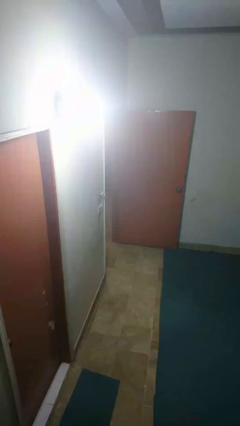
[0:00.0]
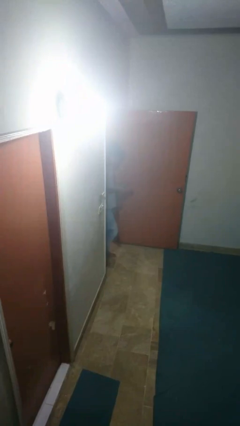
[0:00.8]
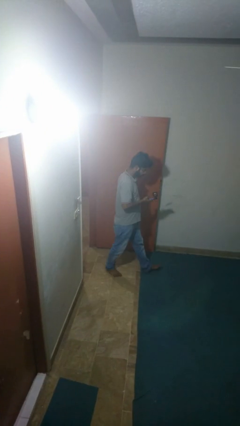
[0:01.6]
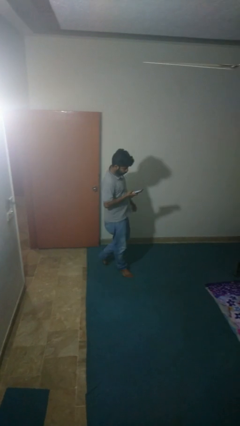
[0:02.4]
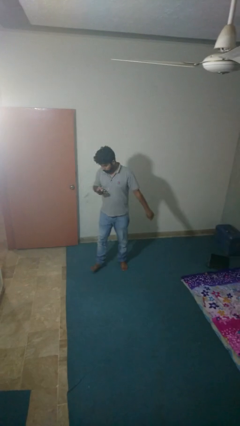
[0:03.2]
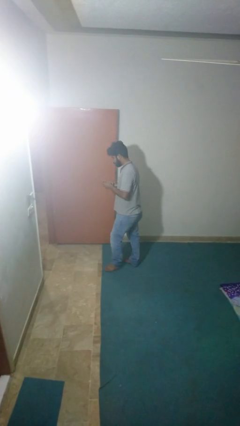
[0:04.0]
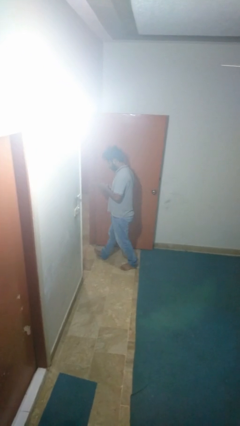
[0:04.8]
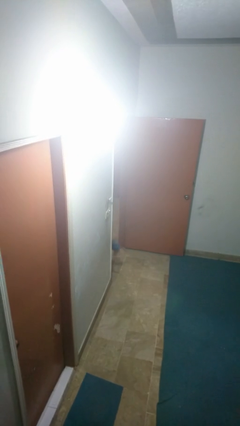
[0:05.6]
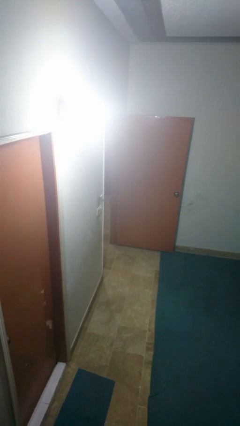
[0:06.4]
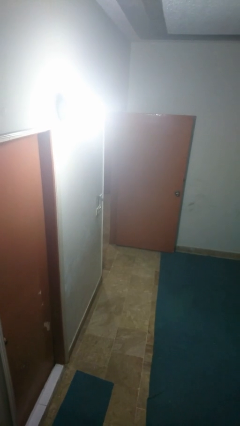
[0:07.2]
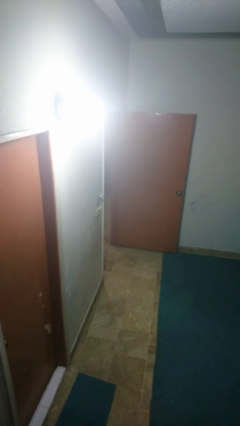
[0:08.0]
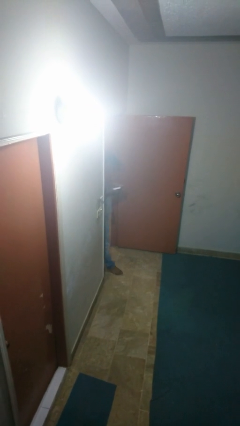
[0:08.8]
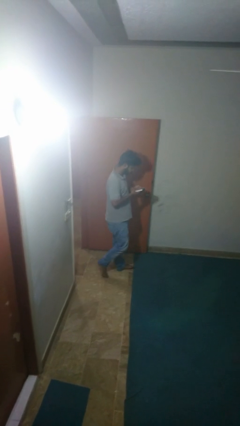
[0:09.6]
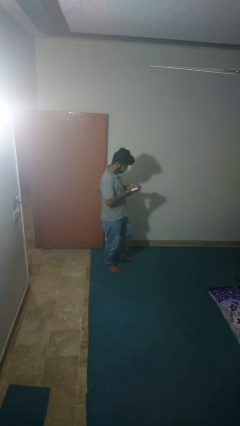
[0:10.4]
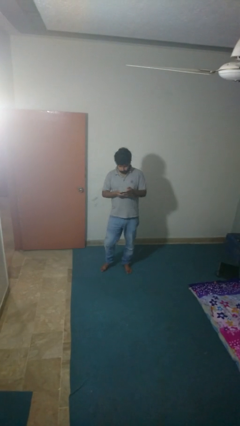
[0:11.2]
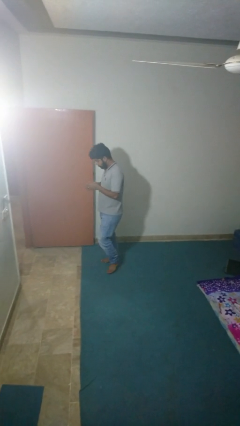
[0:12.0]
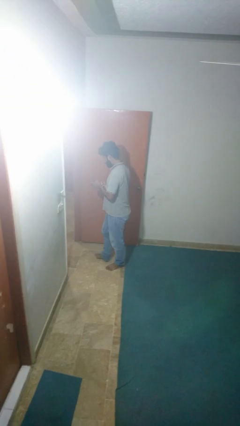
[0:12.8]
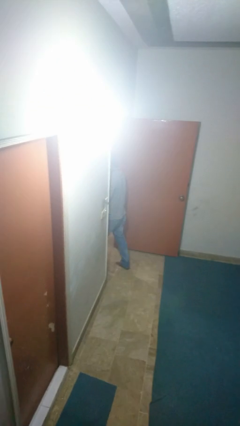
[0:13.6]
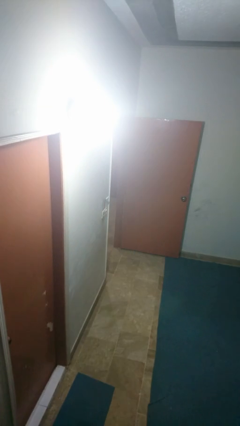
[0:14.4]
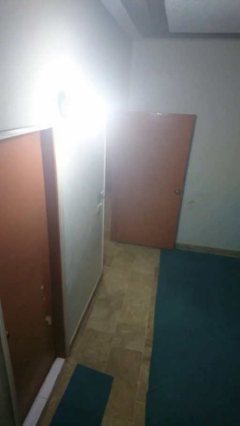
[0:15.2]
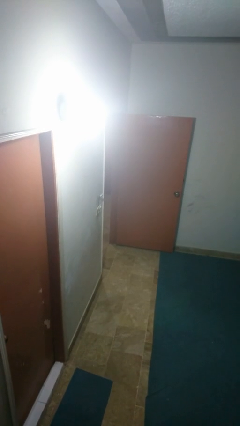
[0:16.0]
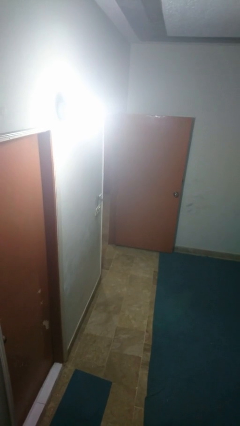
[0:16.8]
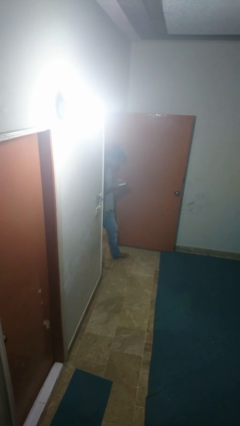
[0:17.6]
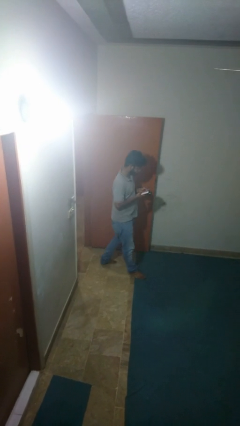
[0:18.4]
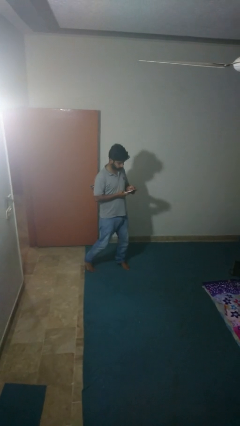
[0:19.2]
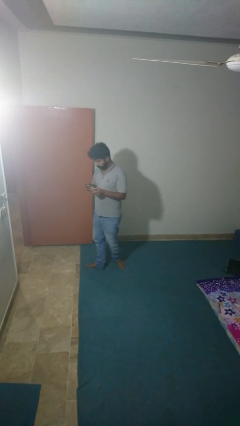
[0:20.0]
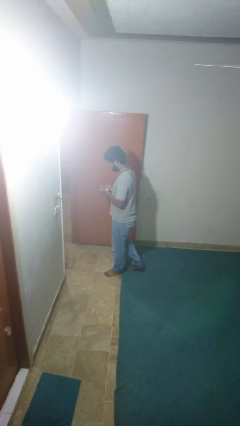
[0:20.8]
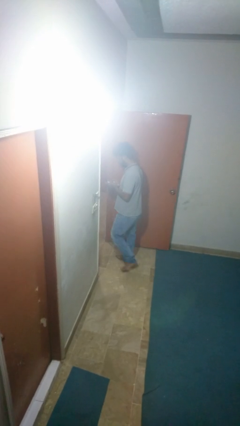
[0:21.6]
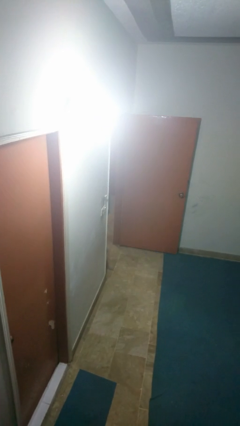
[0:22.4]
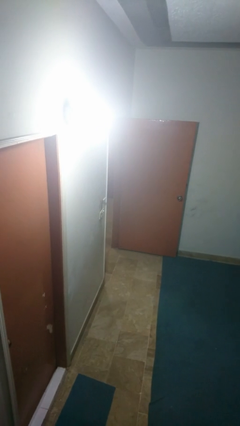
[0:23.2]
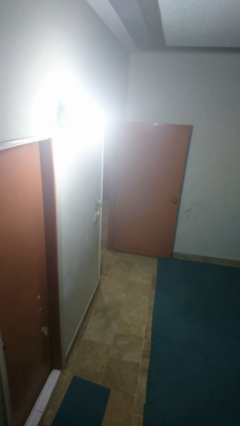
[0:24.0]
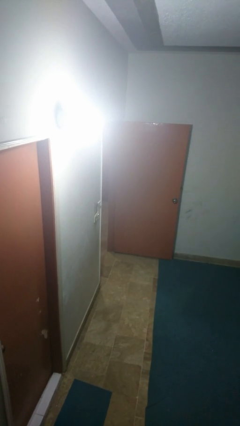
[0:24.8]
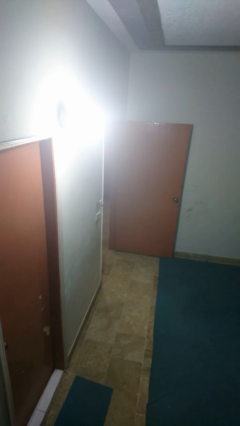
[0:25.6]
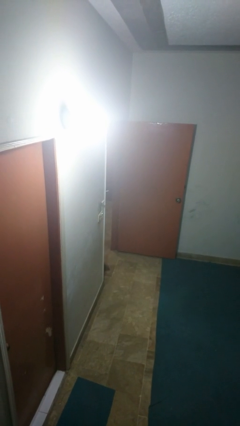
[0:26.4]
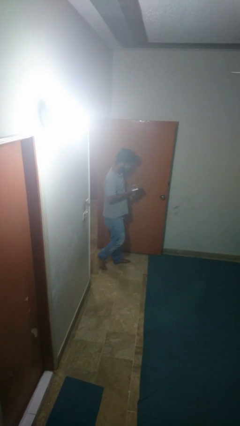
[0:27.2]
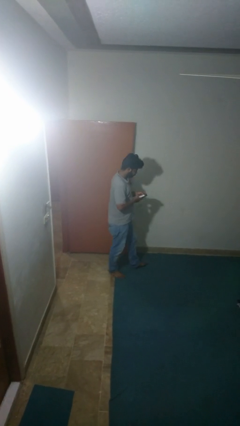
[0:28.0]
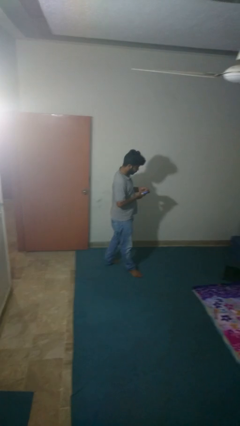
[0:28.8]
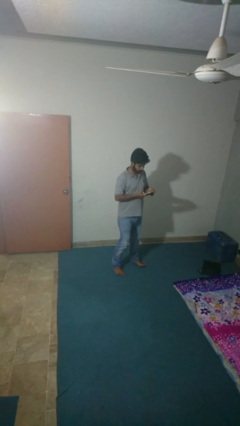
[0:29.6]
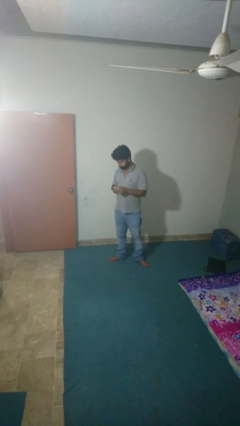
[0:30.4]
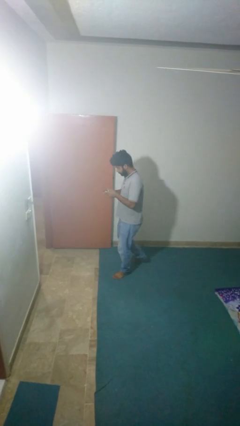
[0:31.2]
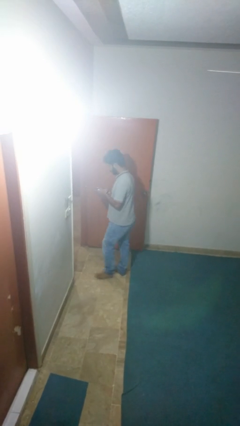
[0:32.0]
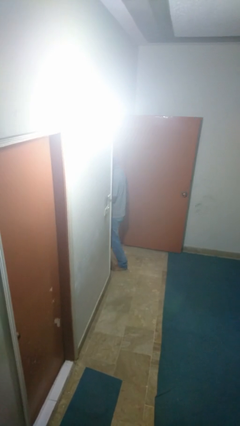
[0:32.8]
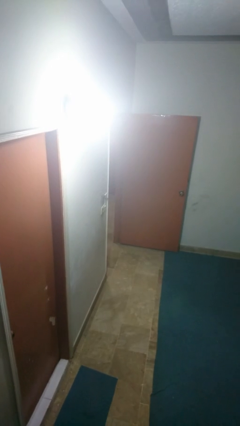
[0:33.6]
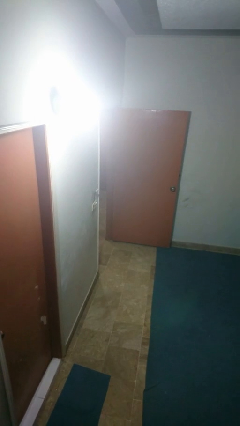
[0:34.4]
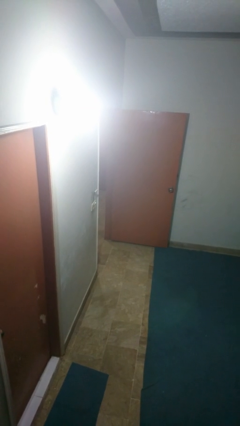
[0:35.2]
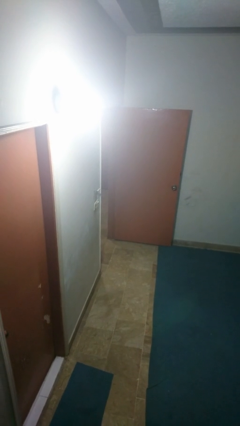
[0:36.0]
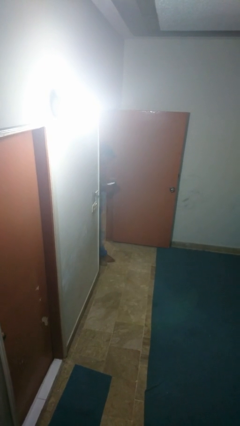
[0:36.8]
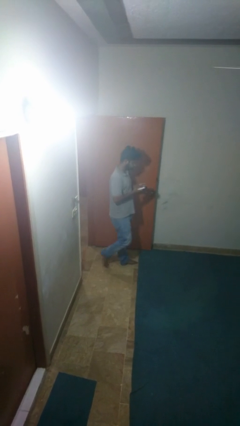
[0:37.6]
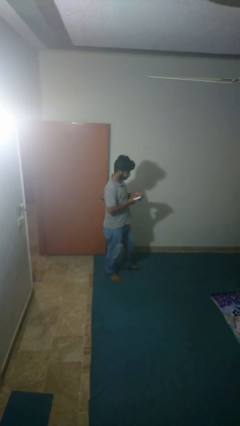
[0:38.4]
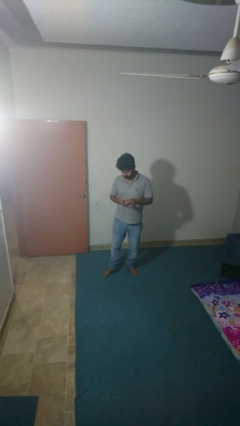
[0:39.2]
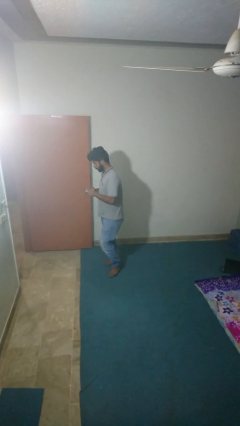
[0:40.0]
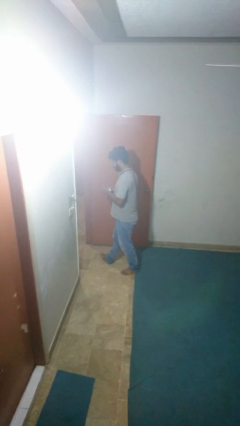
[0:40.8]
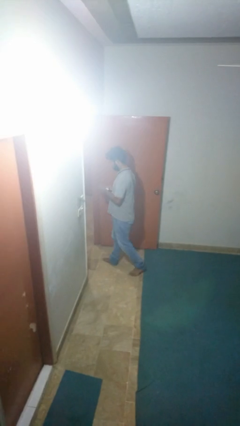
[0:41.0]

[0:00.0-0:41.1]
person texts on phone

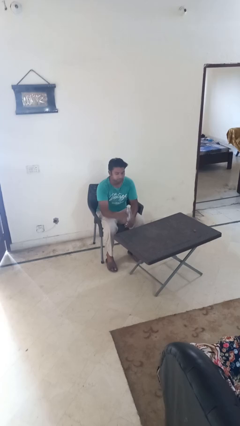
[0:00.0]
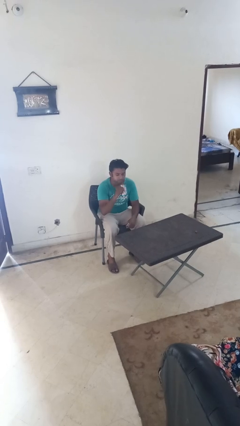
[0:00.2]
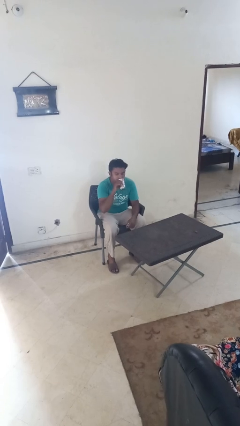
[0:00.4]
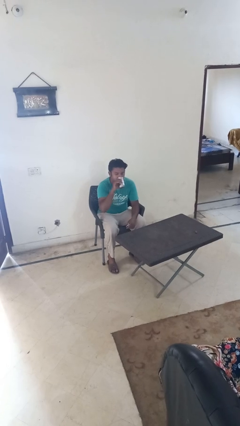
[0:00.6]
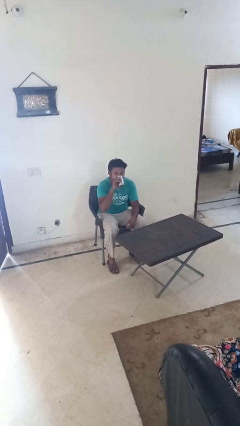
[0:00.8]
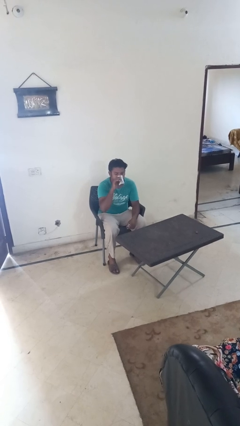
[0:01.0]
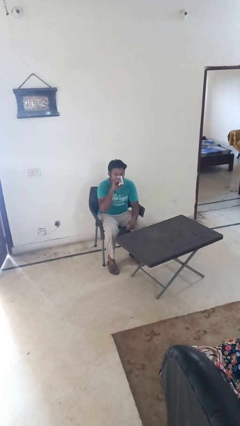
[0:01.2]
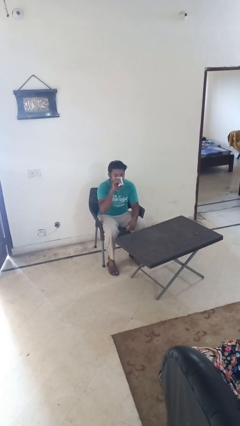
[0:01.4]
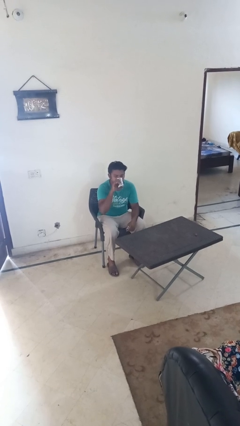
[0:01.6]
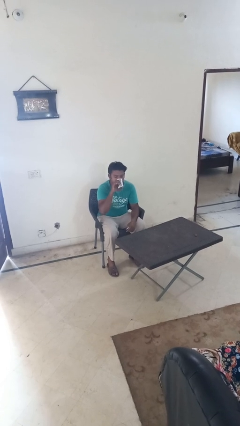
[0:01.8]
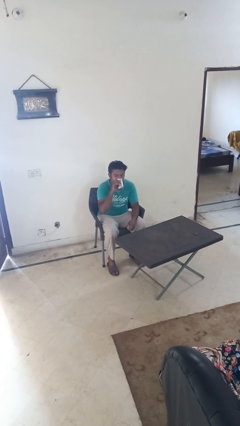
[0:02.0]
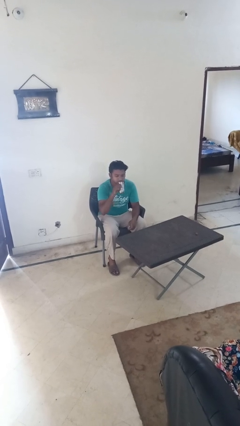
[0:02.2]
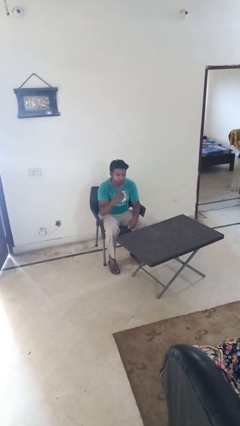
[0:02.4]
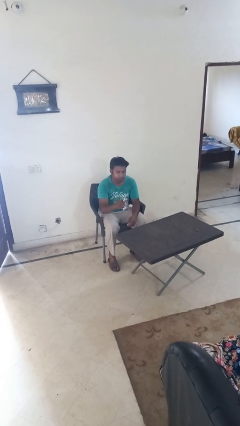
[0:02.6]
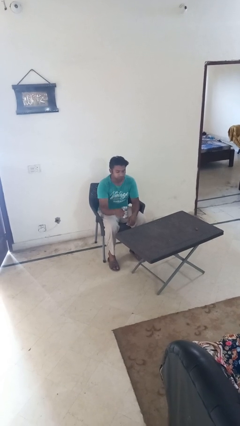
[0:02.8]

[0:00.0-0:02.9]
person drinks from cup

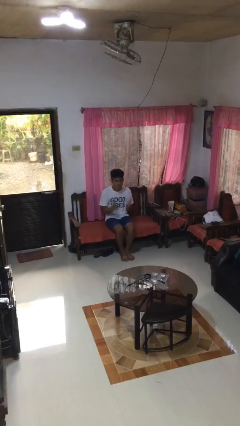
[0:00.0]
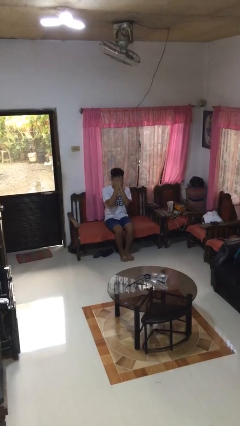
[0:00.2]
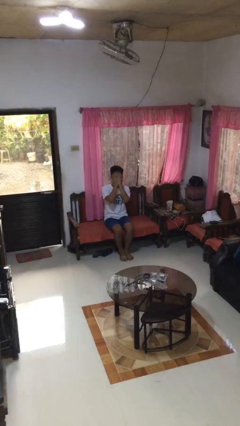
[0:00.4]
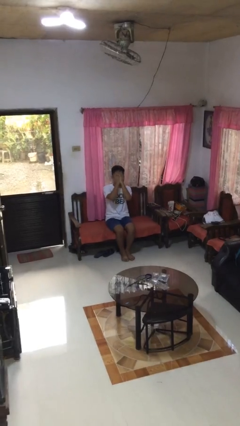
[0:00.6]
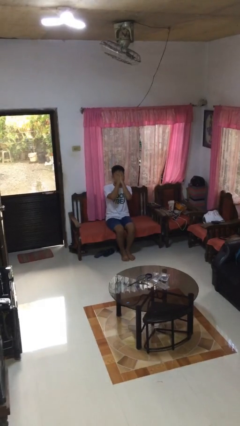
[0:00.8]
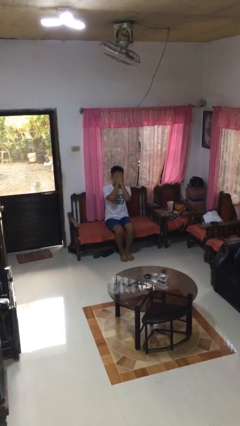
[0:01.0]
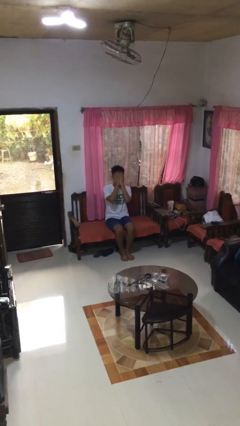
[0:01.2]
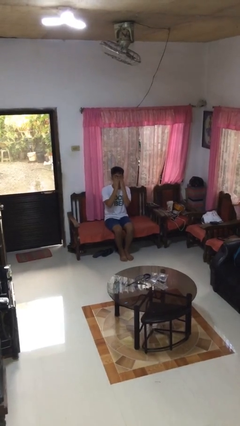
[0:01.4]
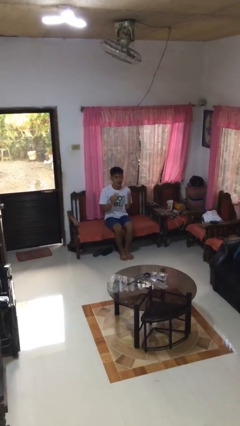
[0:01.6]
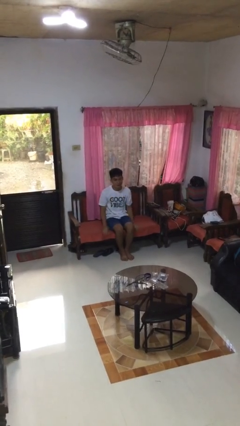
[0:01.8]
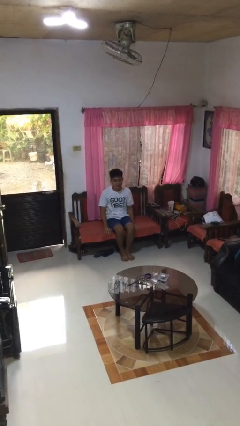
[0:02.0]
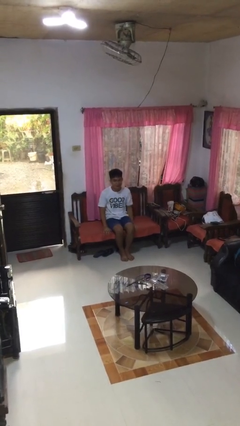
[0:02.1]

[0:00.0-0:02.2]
person covers face with hands

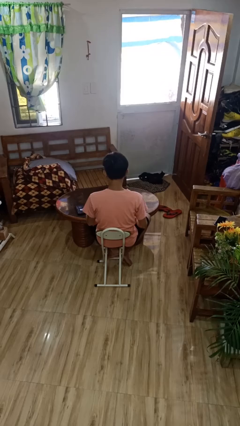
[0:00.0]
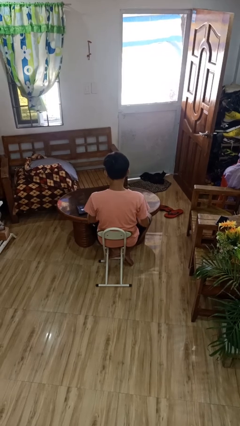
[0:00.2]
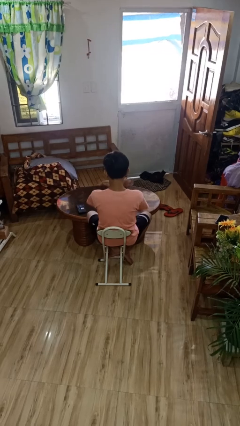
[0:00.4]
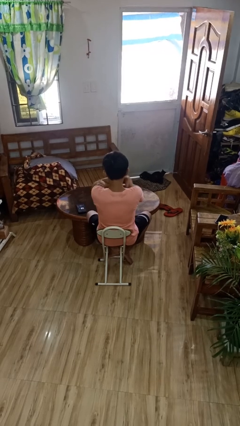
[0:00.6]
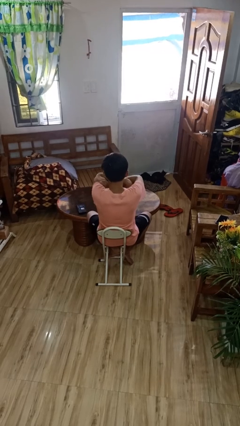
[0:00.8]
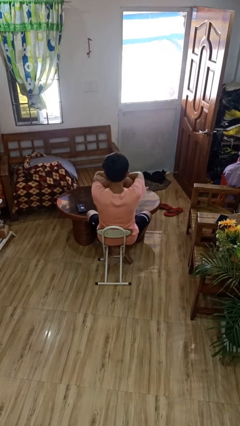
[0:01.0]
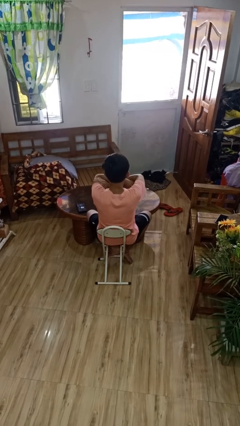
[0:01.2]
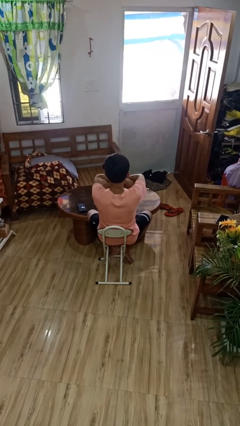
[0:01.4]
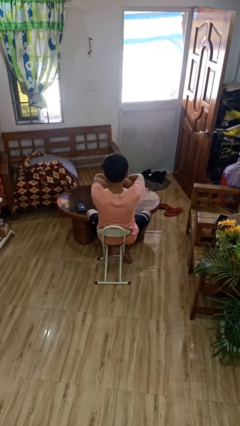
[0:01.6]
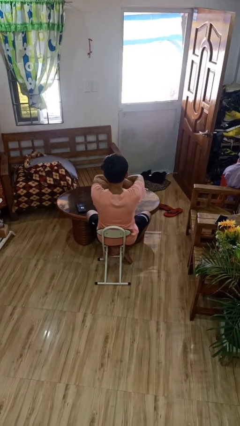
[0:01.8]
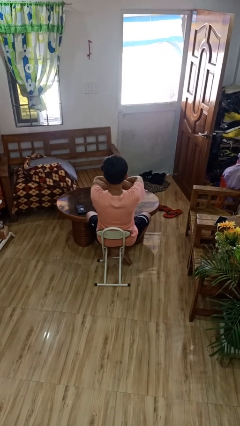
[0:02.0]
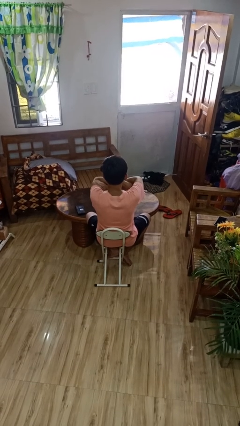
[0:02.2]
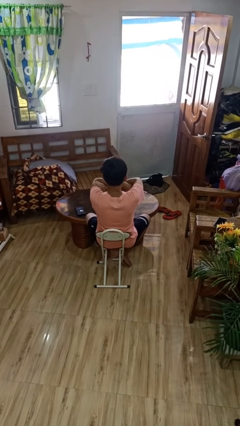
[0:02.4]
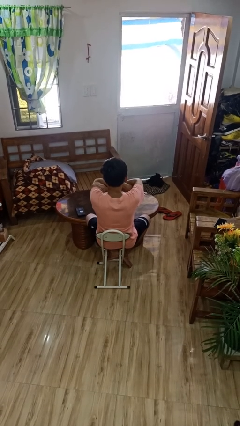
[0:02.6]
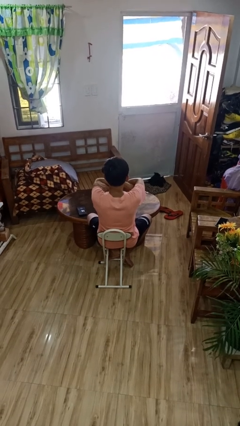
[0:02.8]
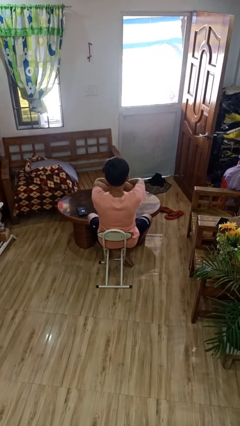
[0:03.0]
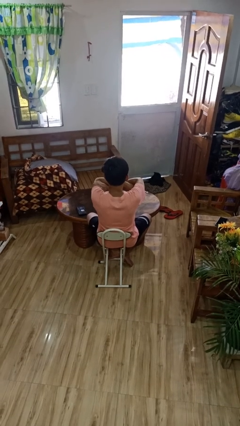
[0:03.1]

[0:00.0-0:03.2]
person crosses arms
